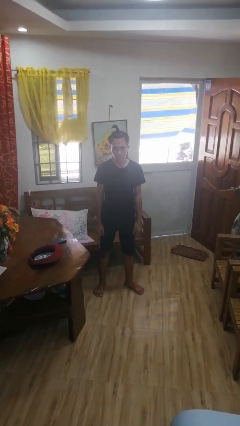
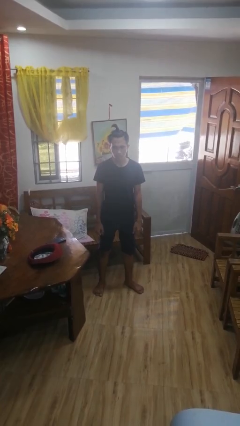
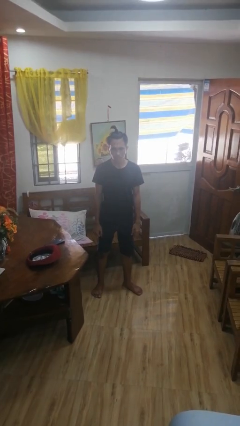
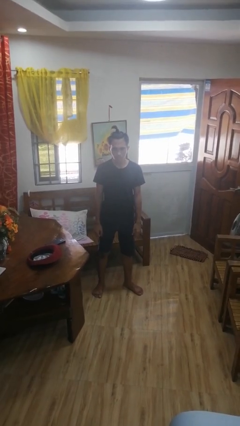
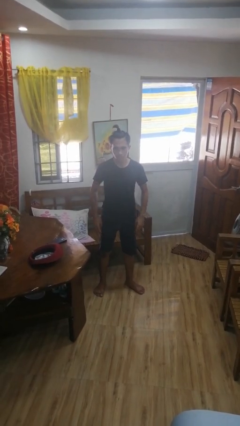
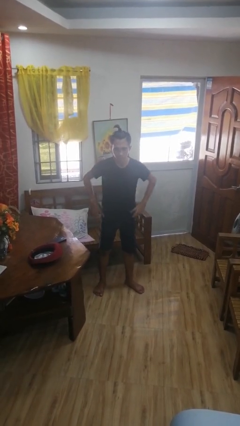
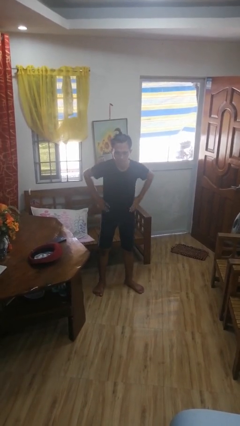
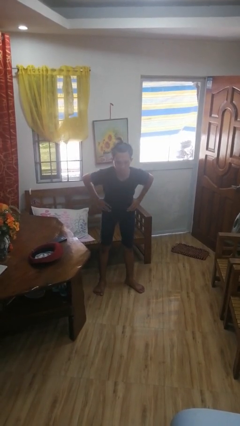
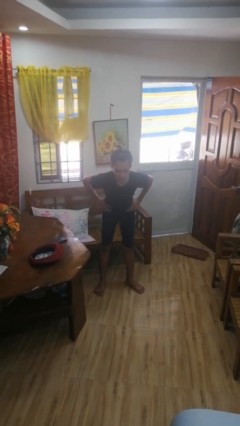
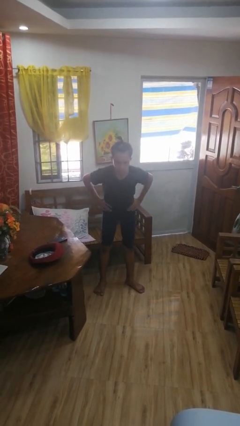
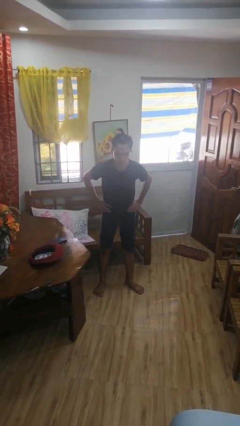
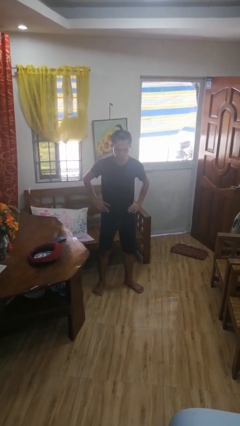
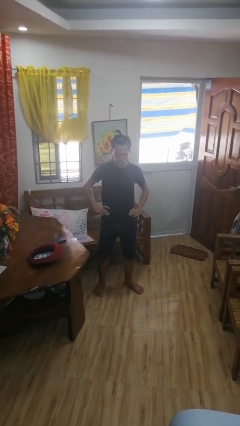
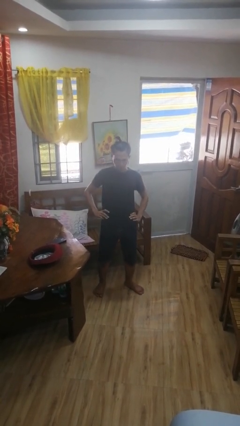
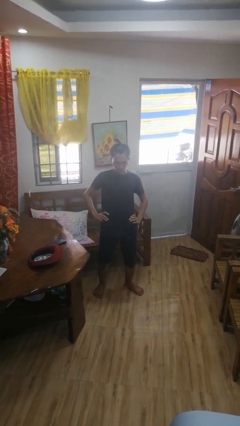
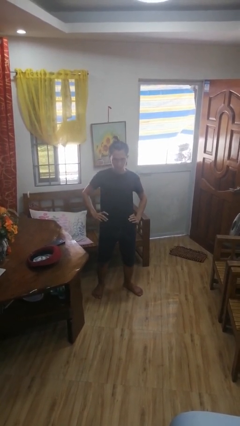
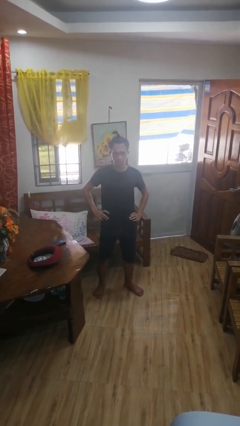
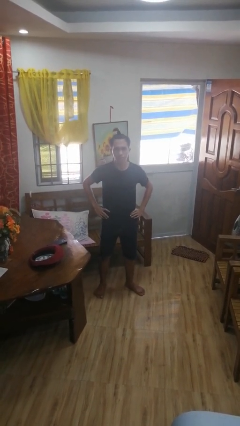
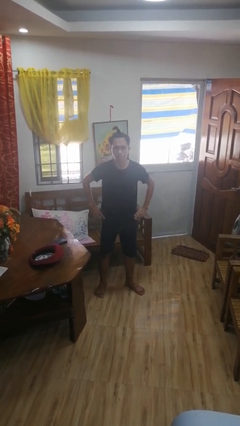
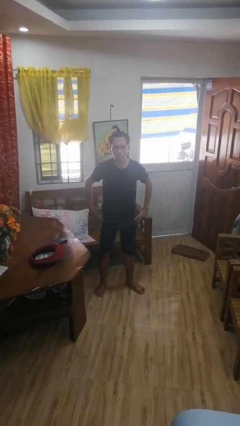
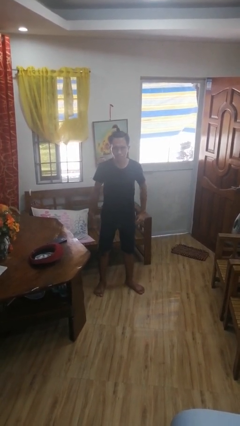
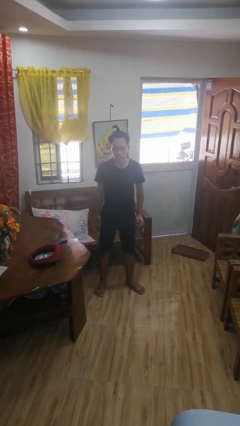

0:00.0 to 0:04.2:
person wiggles hips

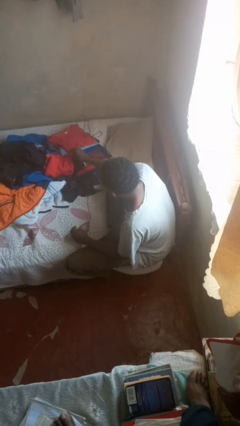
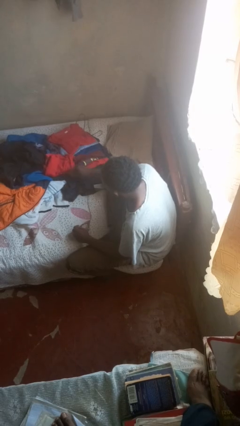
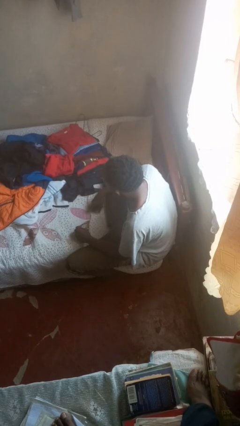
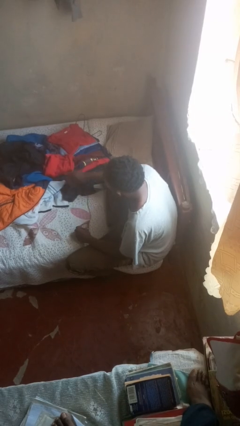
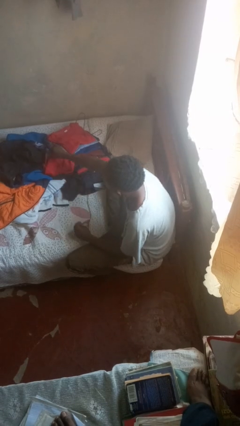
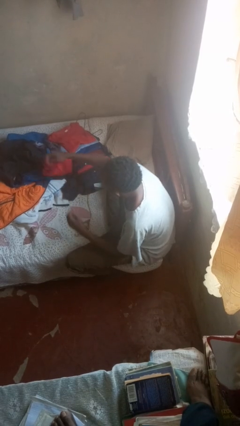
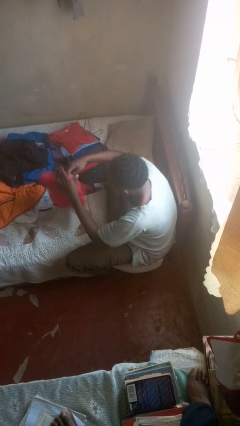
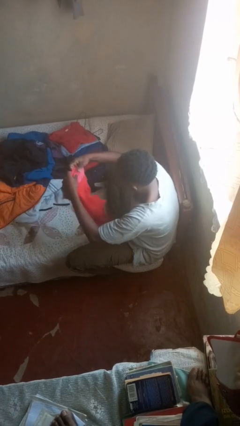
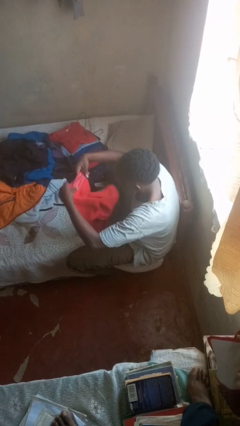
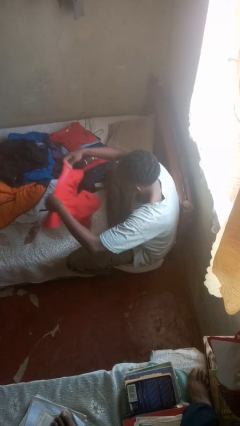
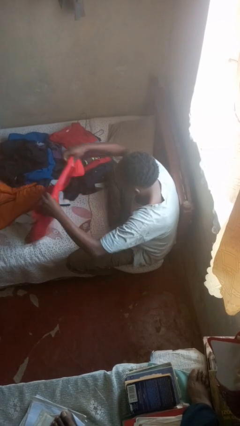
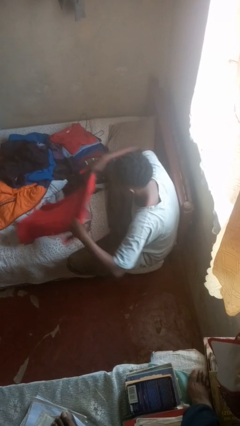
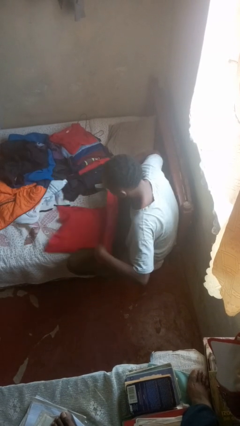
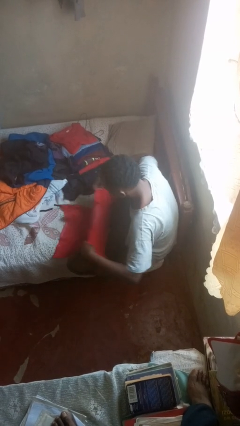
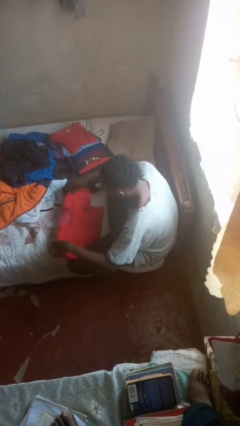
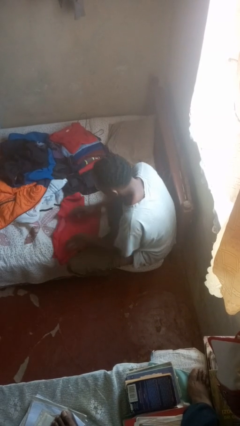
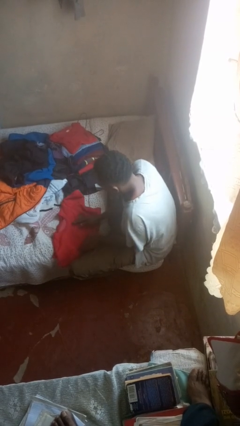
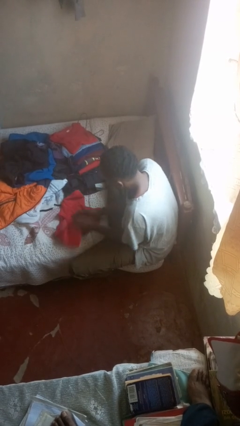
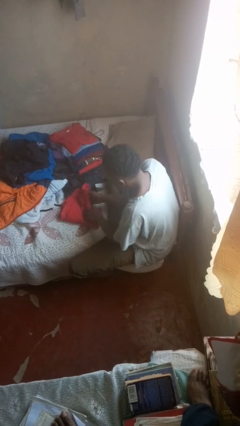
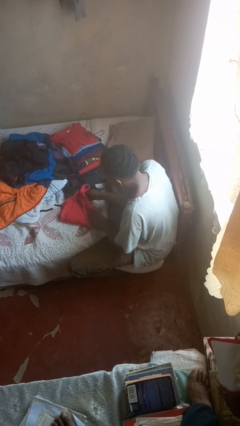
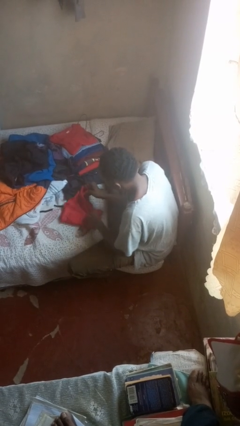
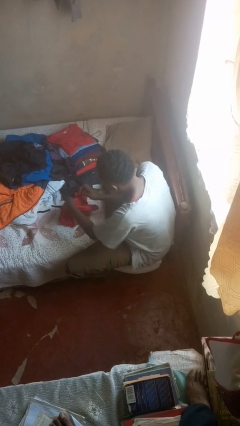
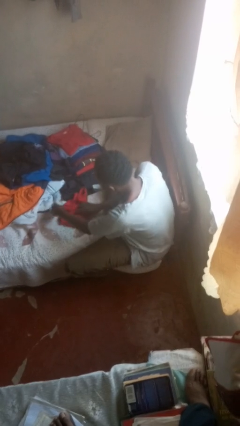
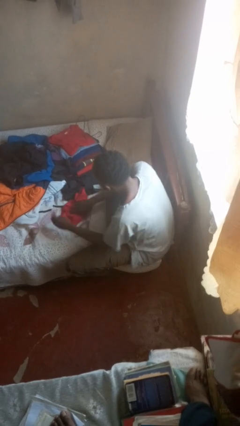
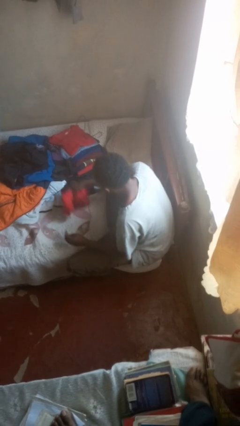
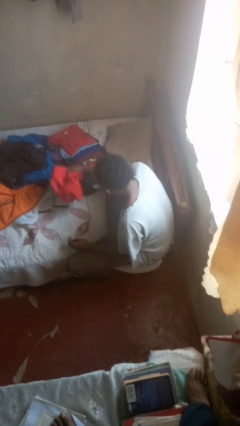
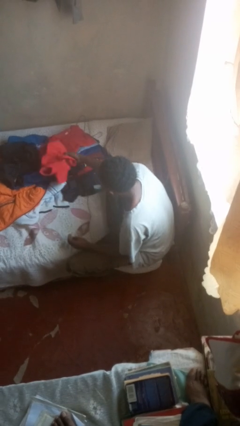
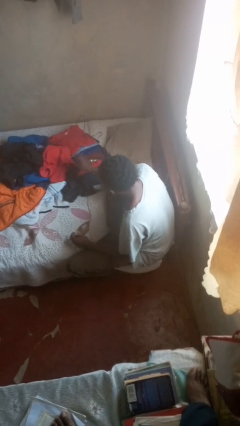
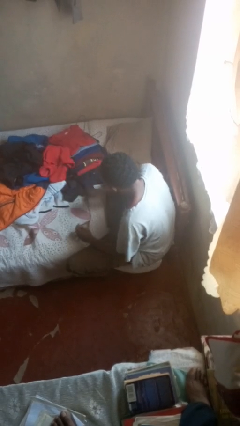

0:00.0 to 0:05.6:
person folds shirt

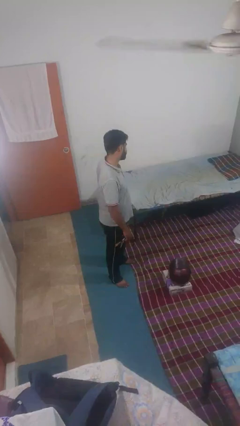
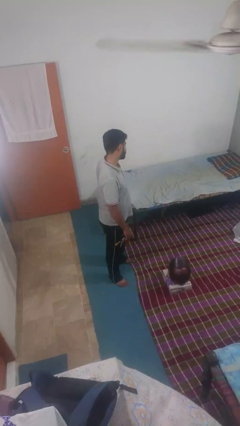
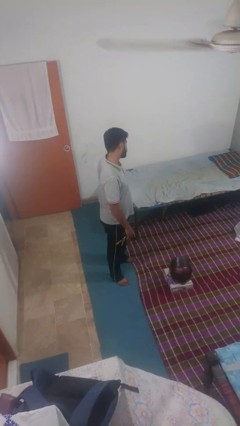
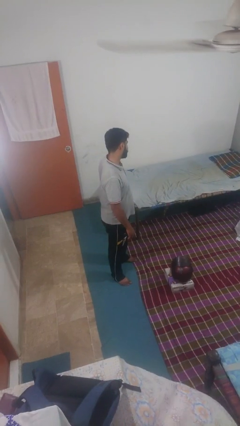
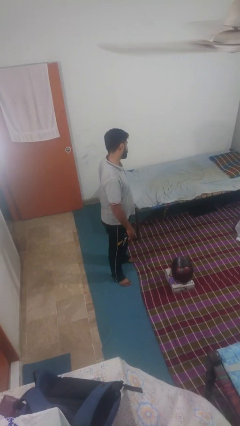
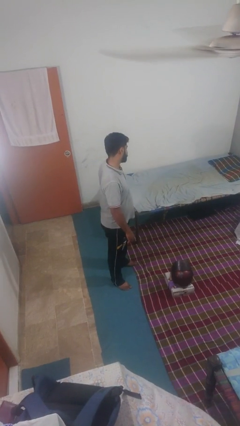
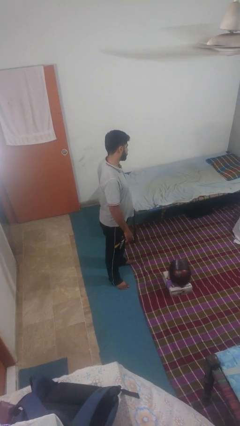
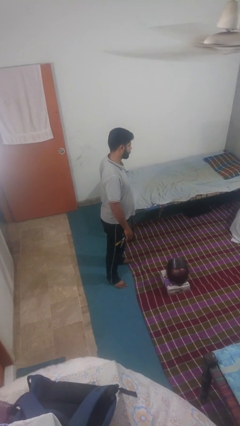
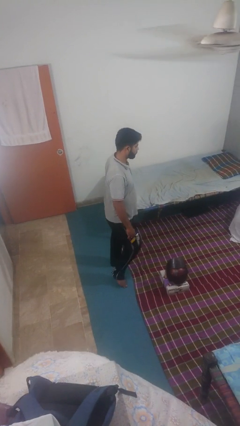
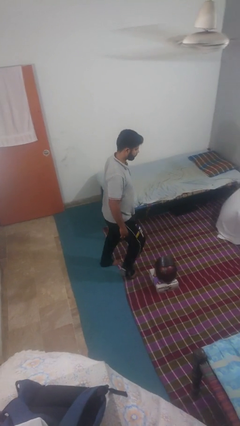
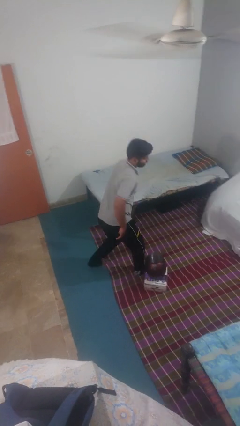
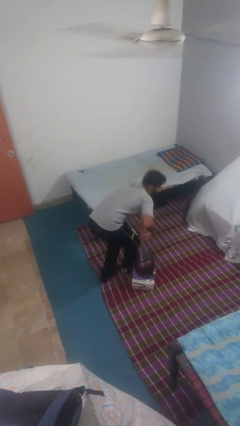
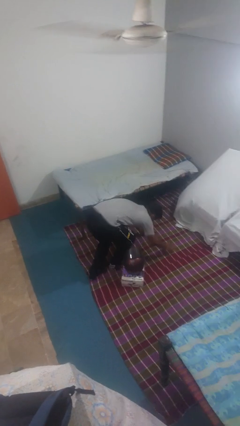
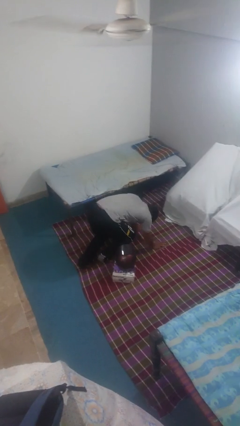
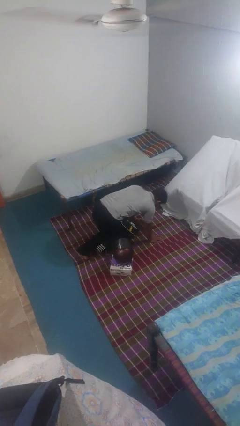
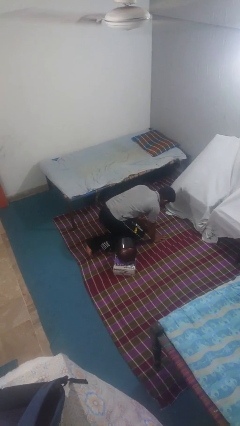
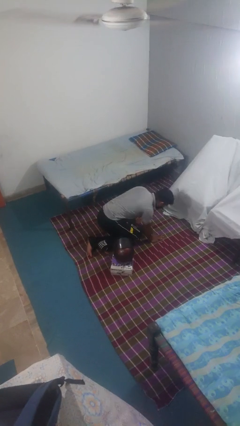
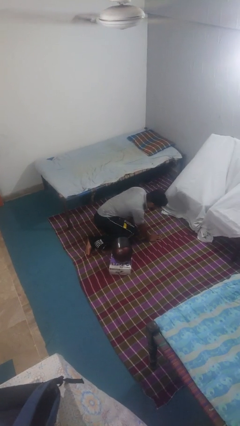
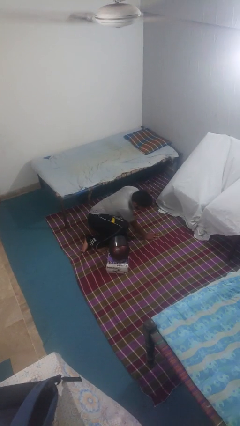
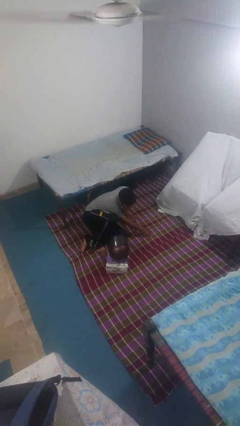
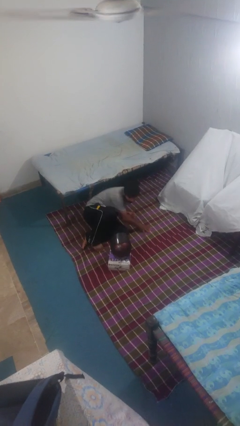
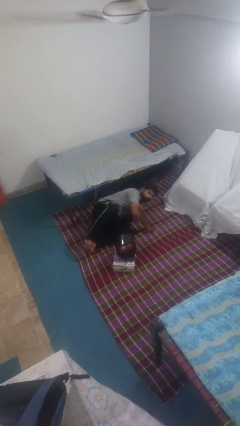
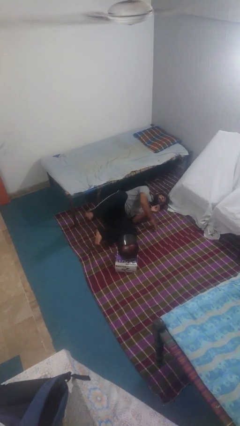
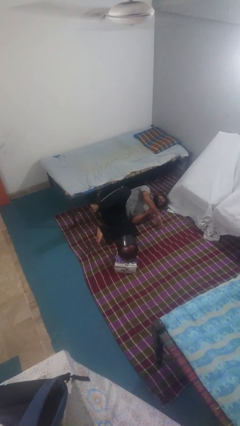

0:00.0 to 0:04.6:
person trips on object on floor

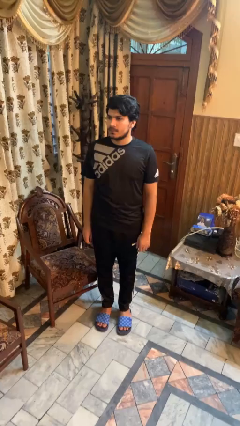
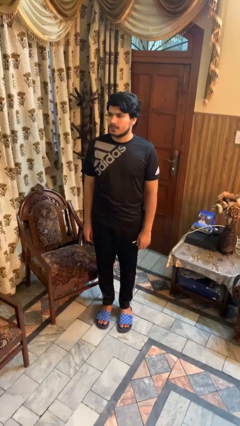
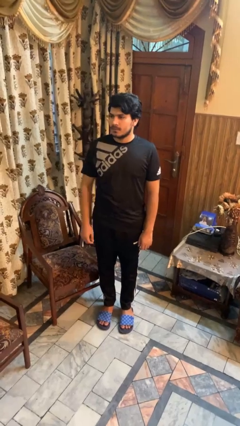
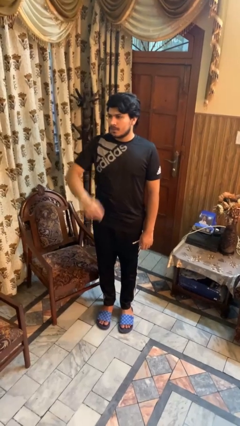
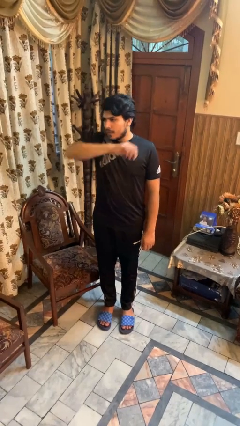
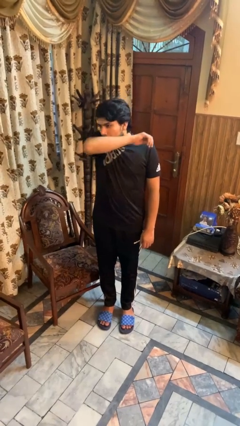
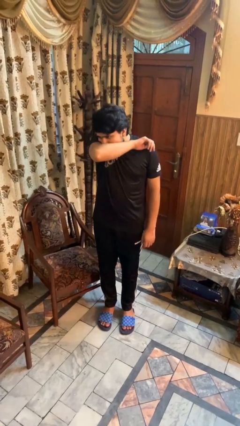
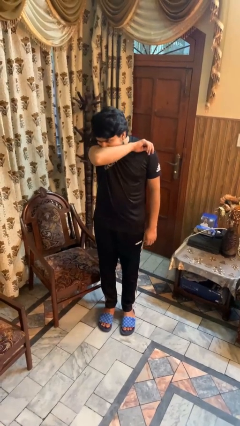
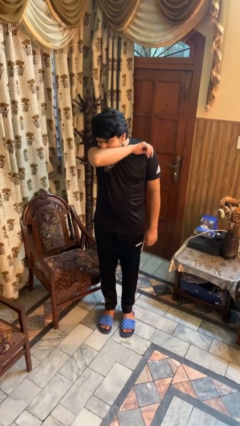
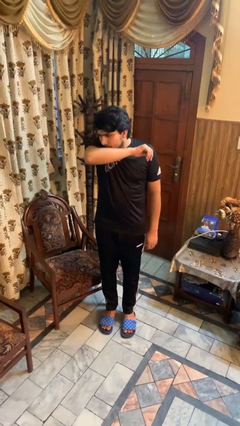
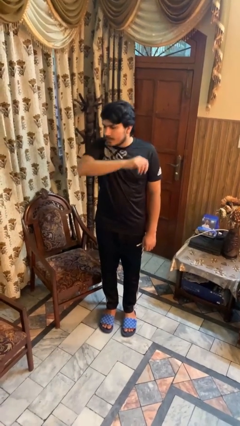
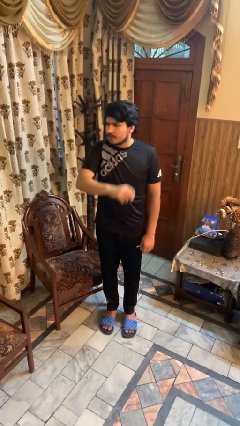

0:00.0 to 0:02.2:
person sneezes into arm

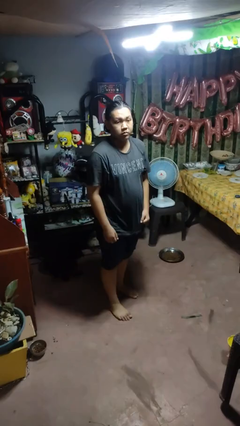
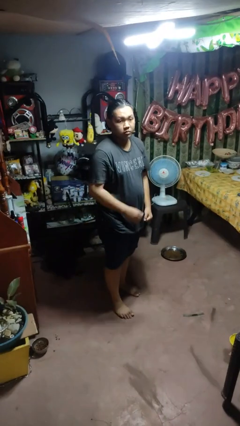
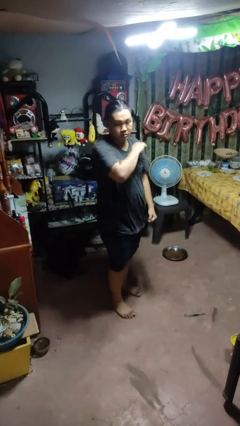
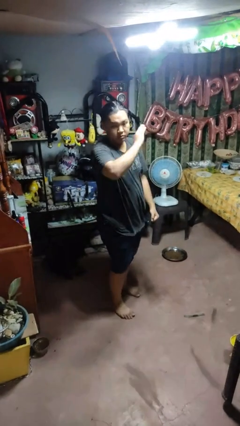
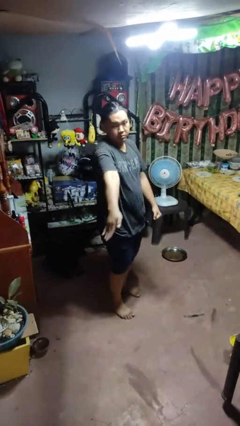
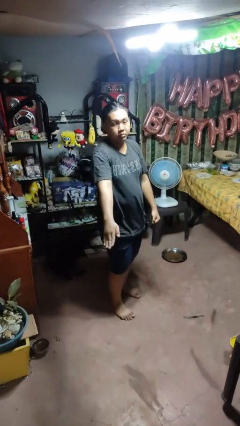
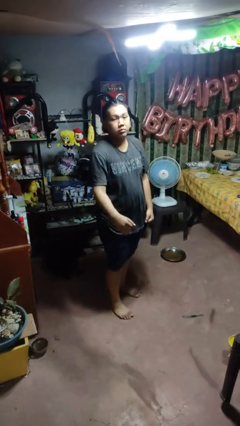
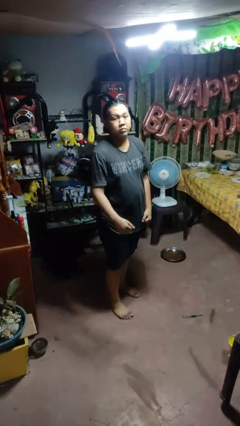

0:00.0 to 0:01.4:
person karate chop
